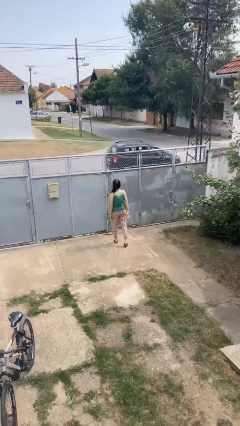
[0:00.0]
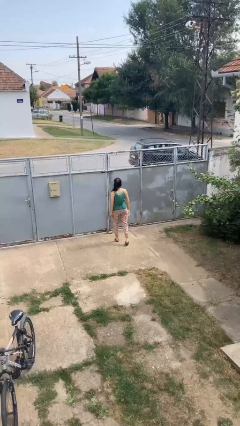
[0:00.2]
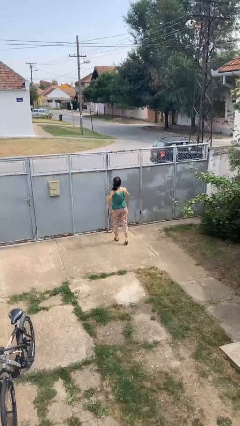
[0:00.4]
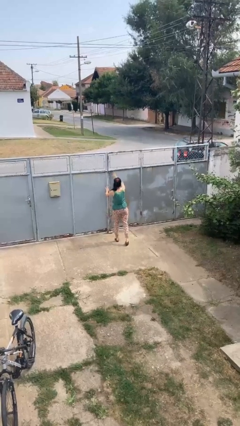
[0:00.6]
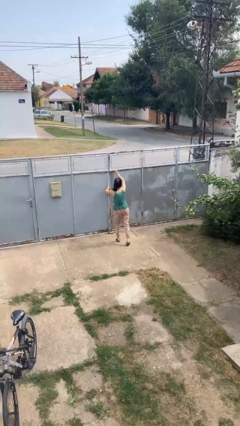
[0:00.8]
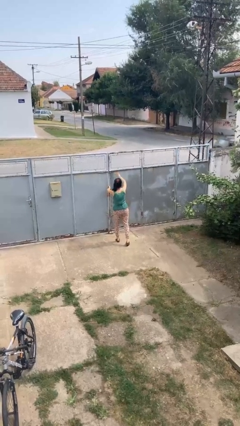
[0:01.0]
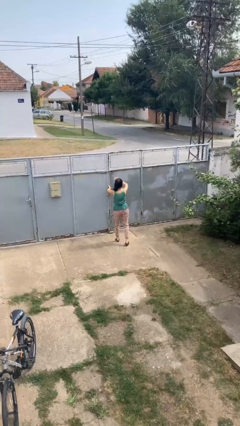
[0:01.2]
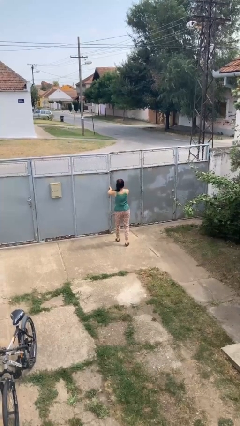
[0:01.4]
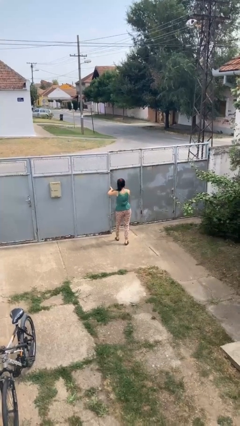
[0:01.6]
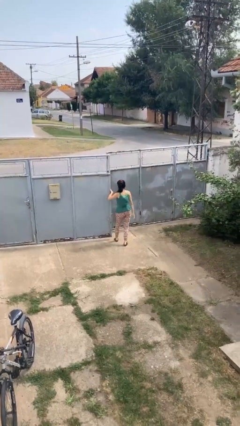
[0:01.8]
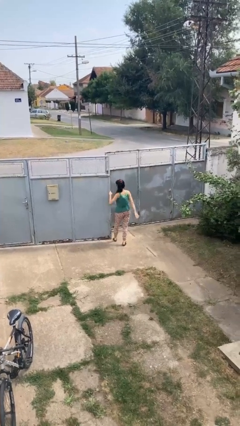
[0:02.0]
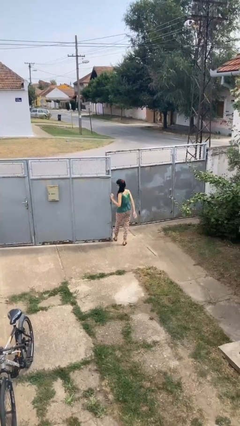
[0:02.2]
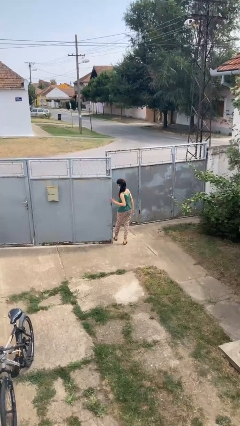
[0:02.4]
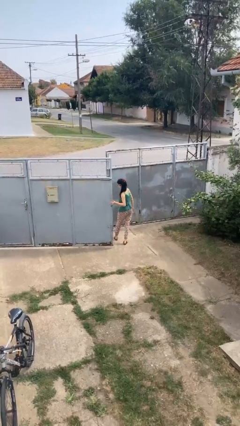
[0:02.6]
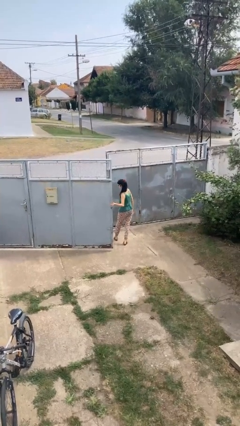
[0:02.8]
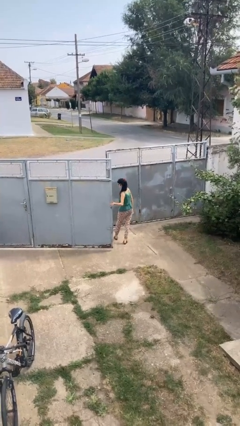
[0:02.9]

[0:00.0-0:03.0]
person opens gate

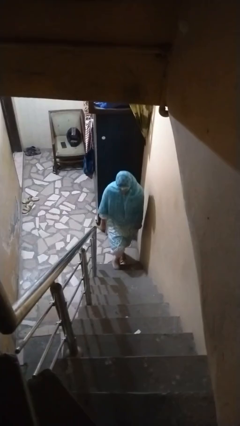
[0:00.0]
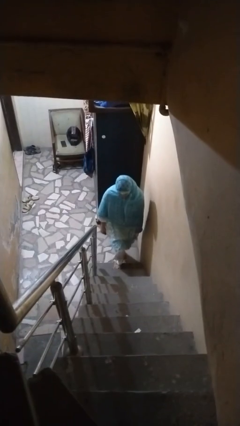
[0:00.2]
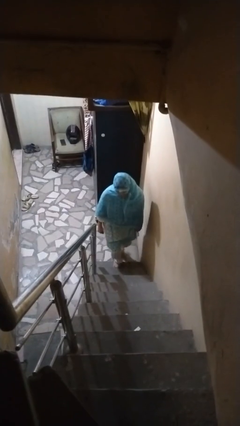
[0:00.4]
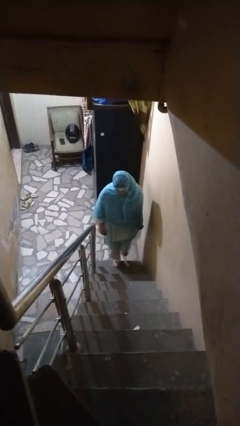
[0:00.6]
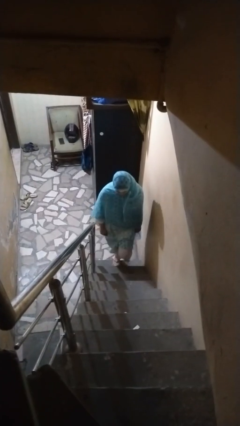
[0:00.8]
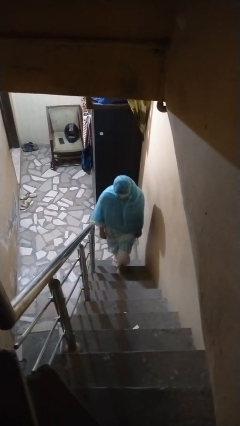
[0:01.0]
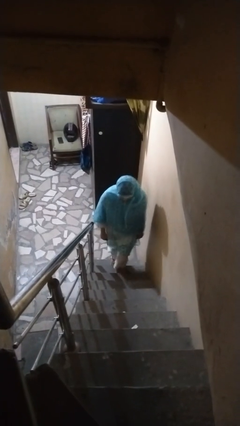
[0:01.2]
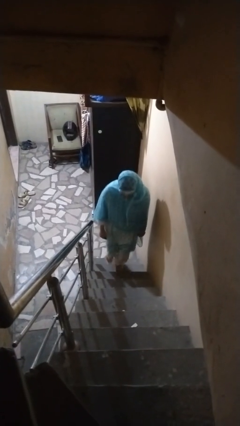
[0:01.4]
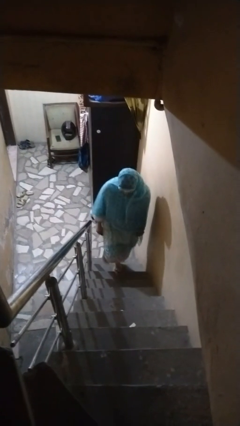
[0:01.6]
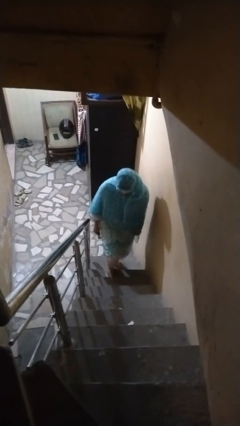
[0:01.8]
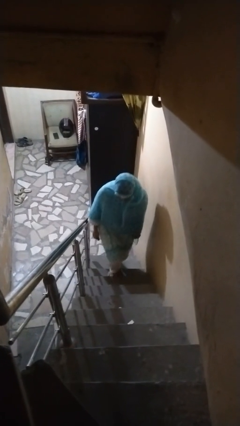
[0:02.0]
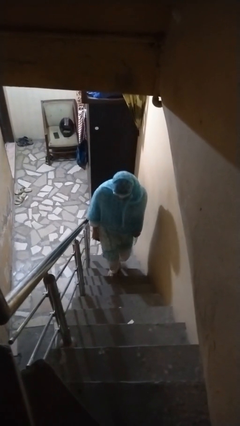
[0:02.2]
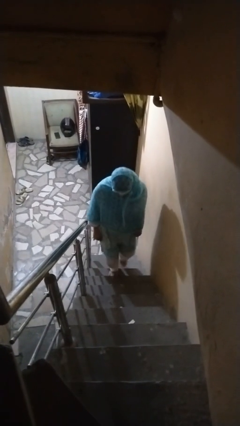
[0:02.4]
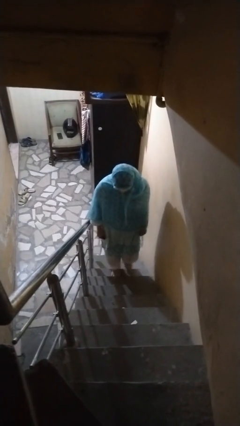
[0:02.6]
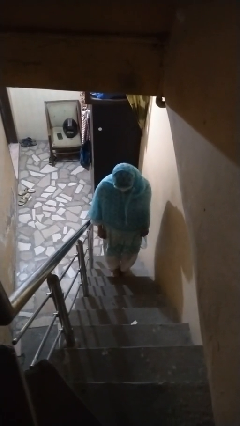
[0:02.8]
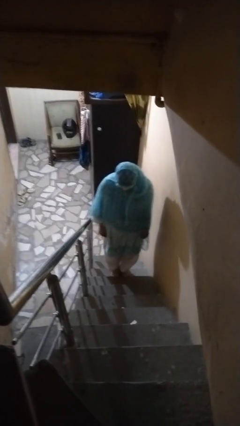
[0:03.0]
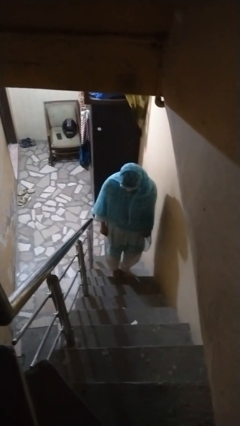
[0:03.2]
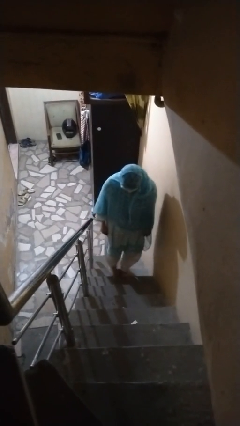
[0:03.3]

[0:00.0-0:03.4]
person climbs up stairs

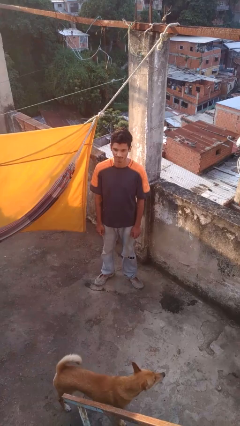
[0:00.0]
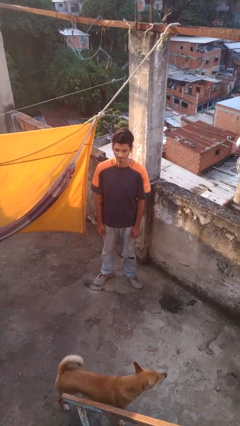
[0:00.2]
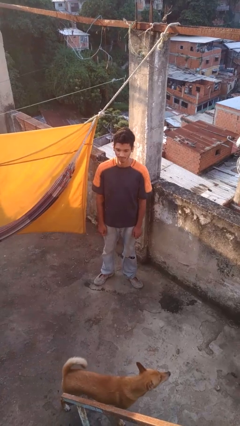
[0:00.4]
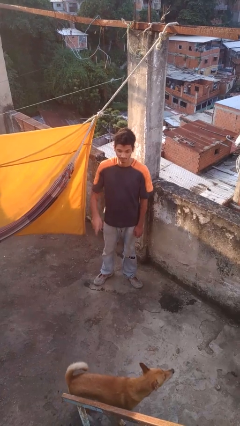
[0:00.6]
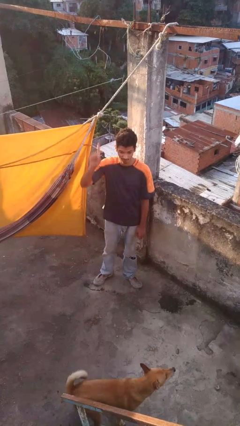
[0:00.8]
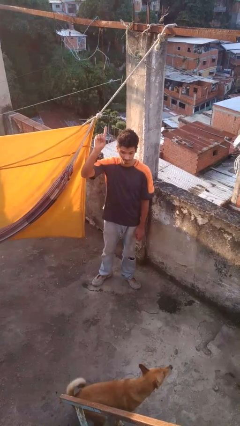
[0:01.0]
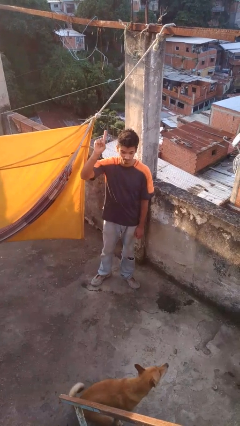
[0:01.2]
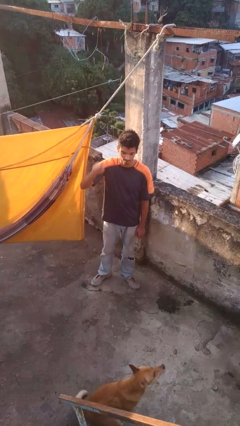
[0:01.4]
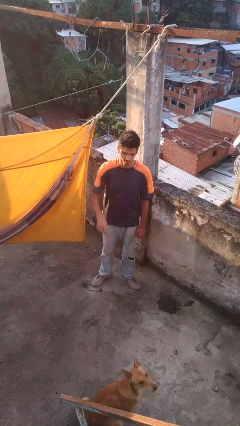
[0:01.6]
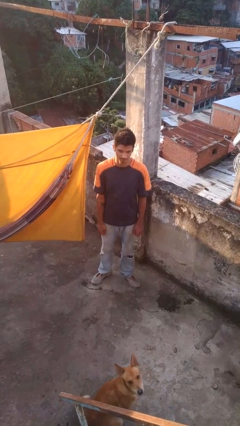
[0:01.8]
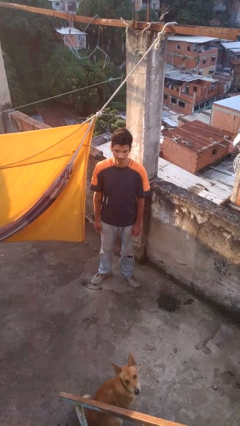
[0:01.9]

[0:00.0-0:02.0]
person gestures number one

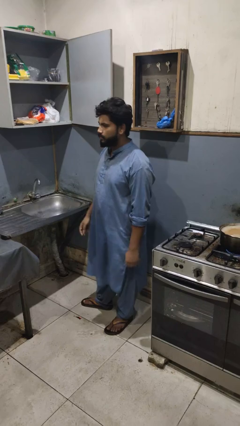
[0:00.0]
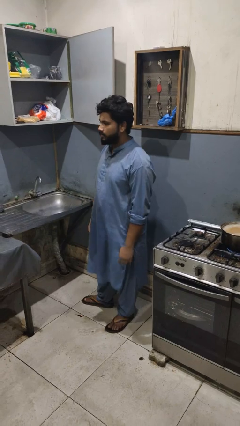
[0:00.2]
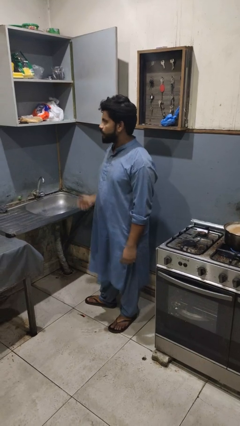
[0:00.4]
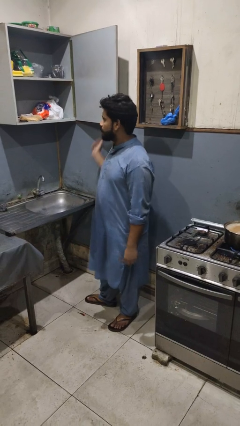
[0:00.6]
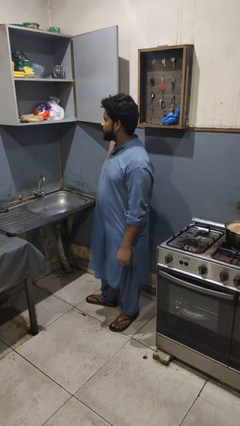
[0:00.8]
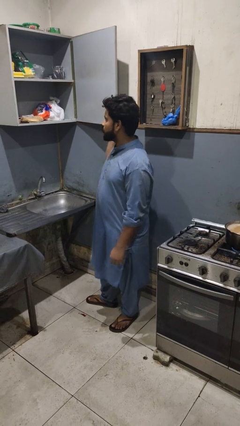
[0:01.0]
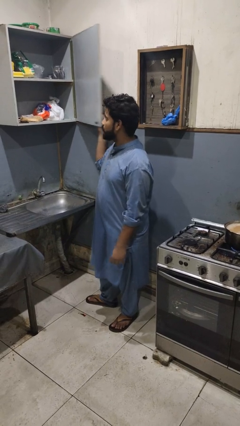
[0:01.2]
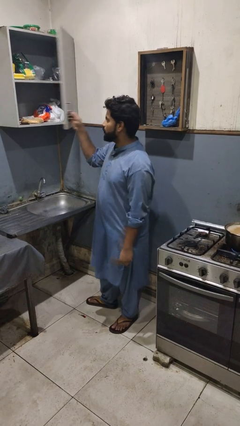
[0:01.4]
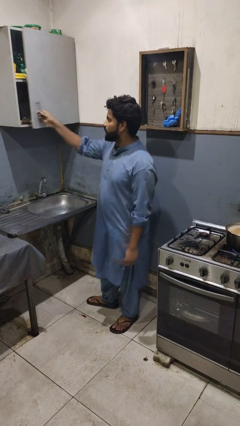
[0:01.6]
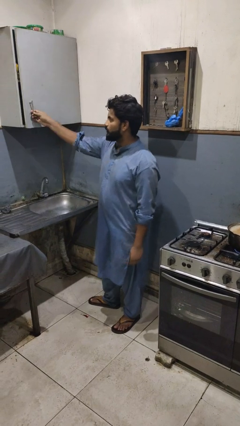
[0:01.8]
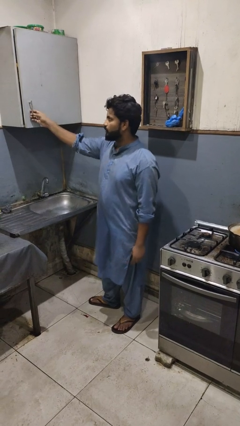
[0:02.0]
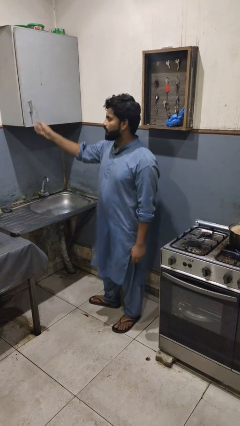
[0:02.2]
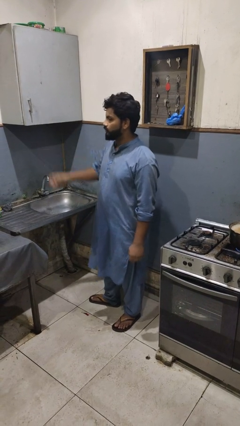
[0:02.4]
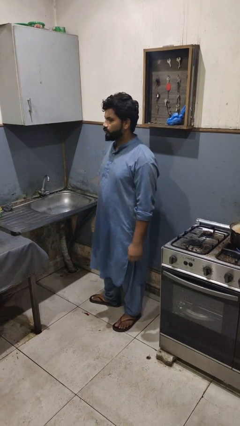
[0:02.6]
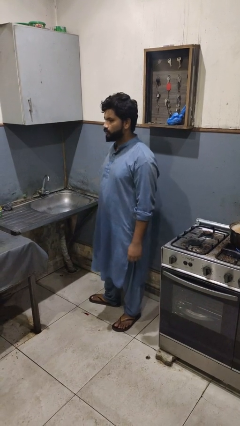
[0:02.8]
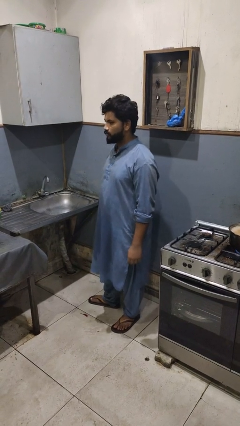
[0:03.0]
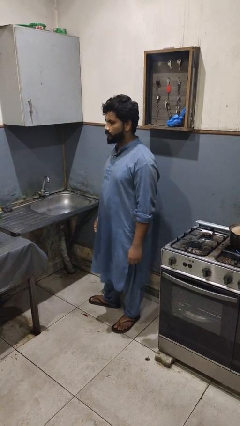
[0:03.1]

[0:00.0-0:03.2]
person opens cabinet

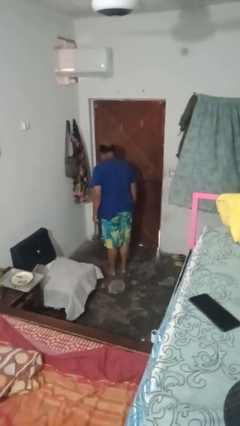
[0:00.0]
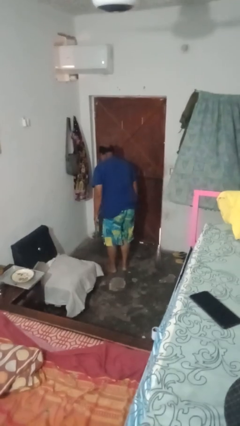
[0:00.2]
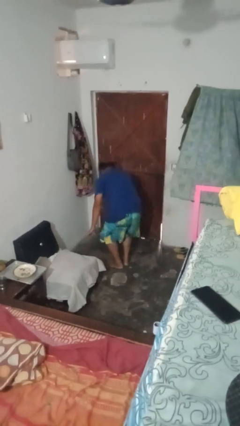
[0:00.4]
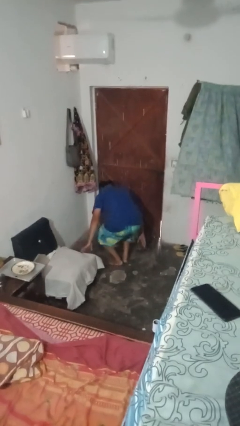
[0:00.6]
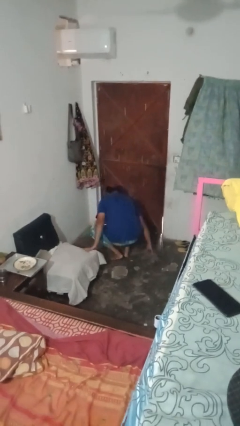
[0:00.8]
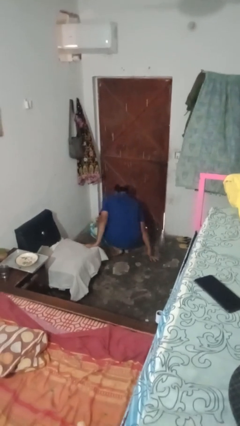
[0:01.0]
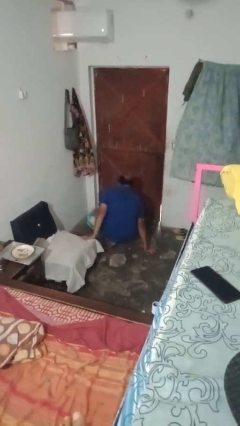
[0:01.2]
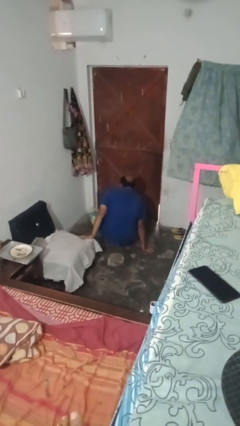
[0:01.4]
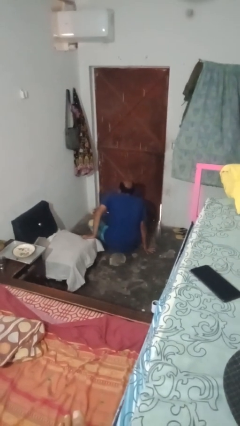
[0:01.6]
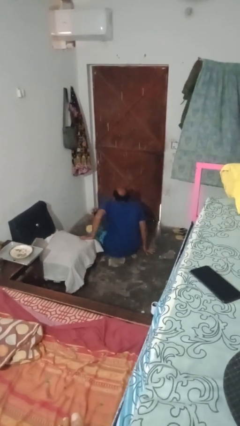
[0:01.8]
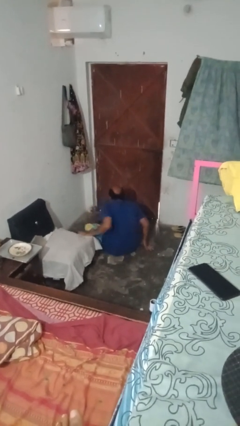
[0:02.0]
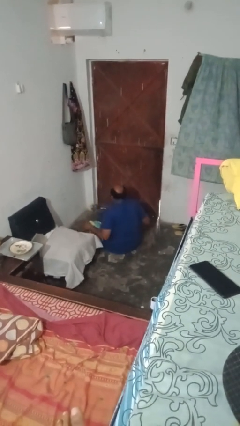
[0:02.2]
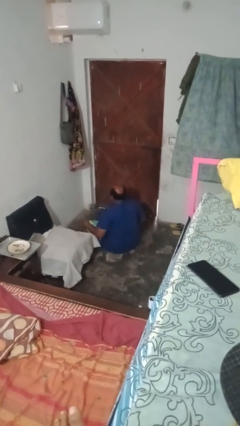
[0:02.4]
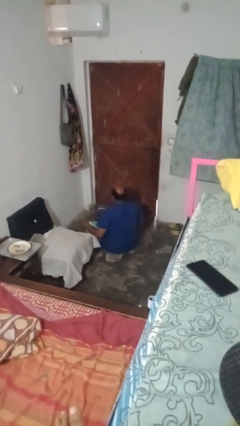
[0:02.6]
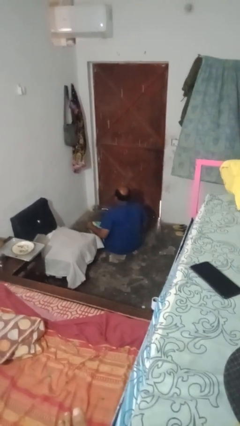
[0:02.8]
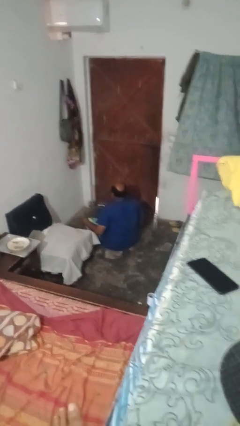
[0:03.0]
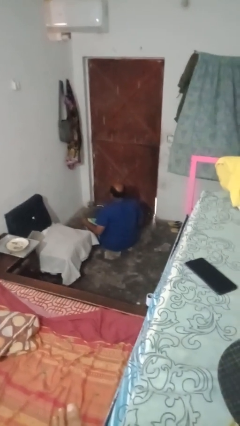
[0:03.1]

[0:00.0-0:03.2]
person crosses legs

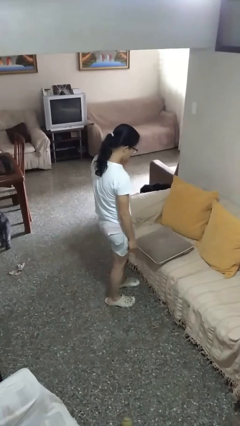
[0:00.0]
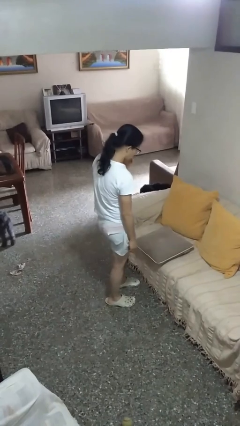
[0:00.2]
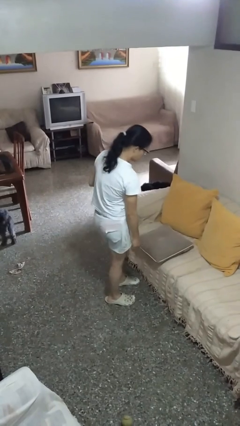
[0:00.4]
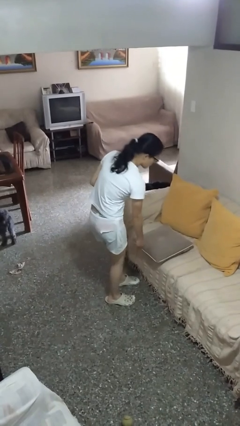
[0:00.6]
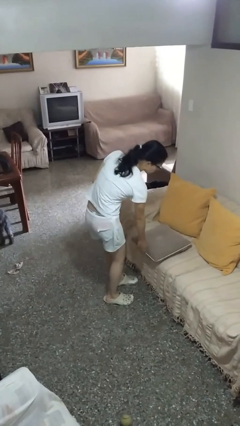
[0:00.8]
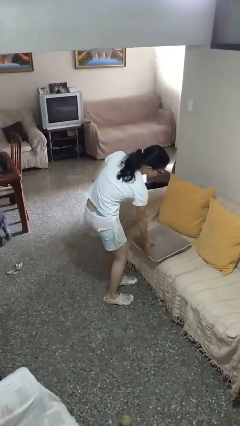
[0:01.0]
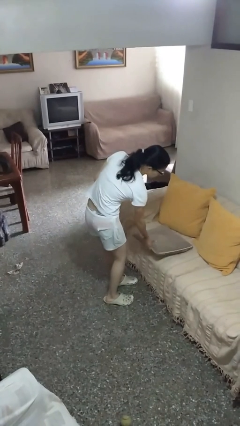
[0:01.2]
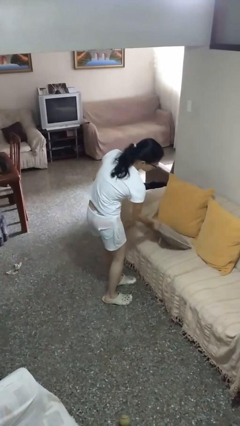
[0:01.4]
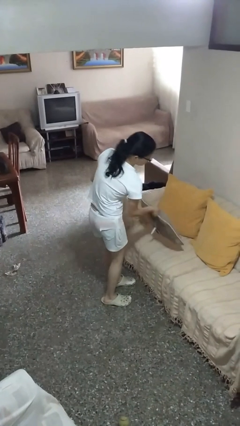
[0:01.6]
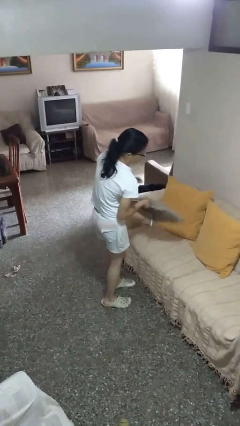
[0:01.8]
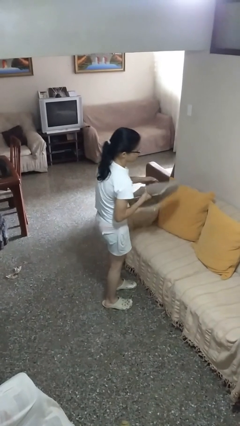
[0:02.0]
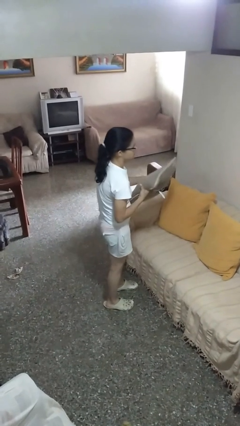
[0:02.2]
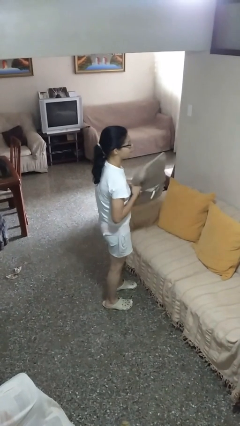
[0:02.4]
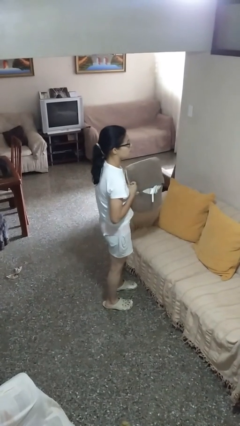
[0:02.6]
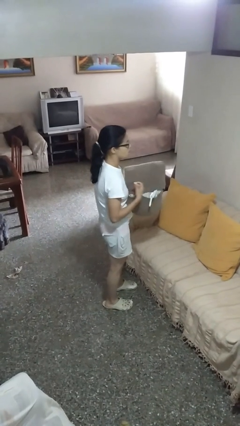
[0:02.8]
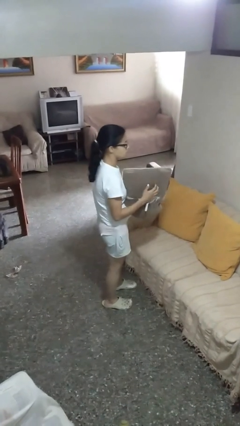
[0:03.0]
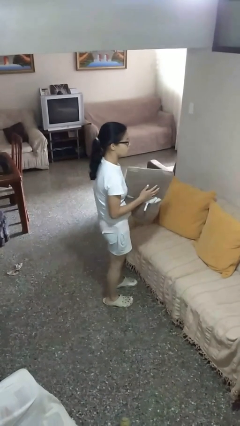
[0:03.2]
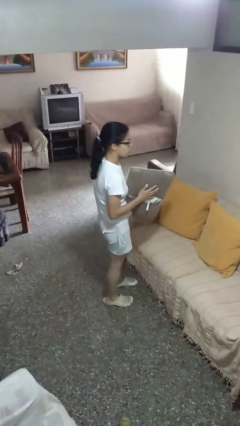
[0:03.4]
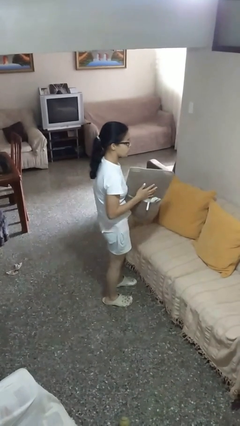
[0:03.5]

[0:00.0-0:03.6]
person picks up object from couch
